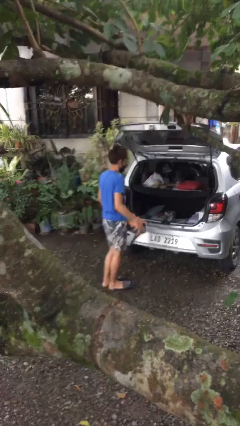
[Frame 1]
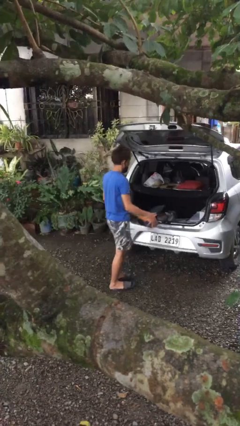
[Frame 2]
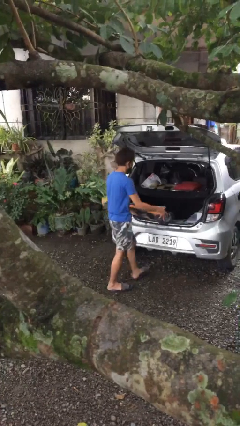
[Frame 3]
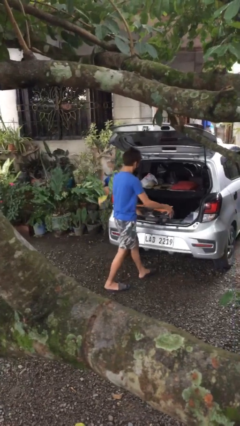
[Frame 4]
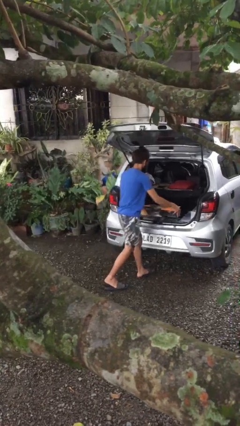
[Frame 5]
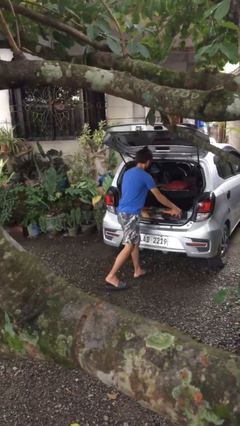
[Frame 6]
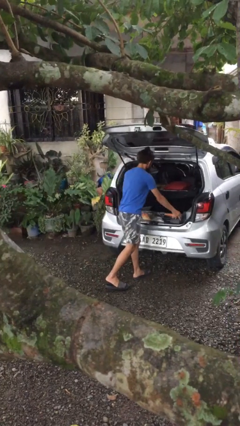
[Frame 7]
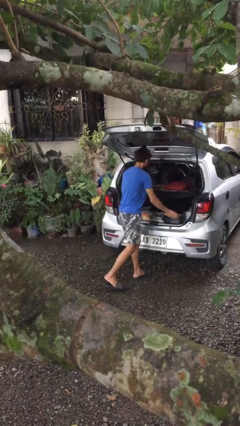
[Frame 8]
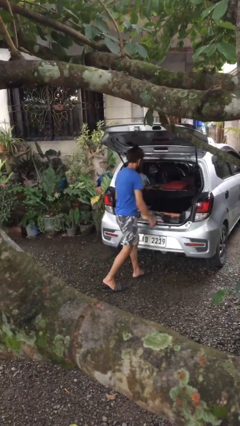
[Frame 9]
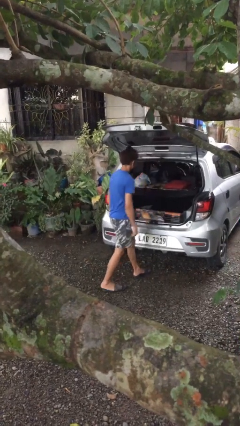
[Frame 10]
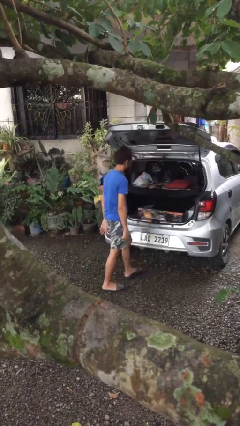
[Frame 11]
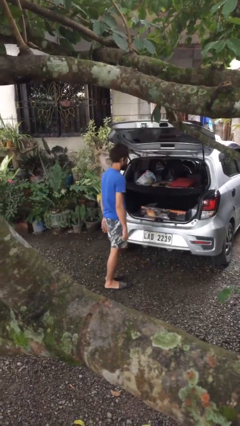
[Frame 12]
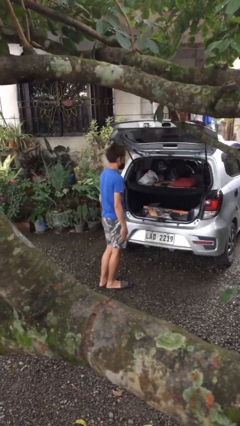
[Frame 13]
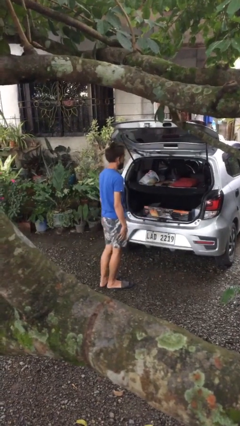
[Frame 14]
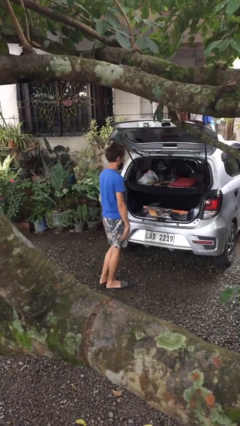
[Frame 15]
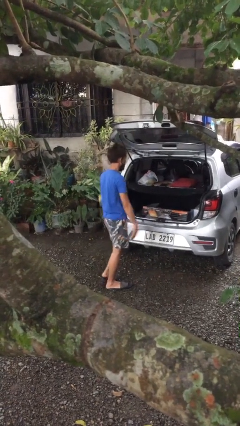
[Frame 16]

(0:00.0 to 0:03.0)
person loads car

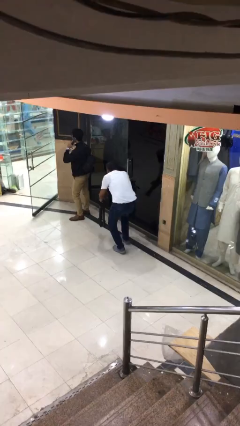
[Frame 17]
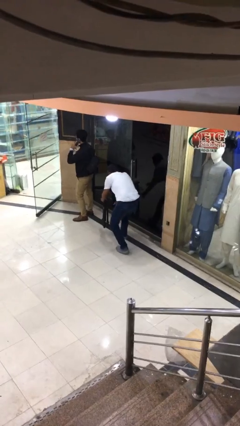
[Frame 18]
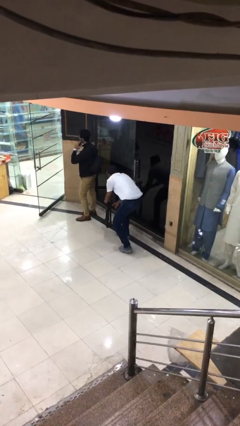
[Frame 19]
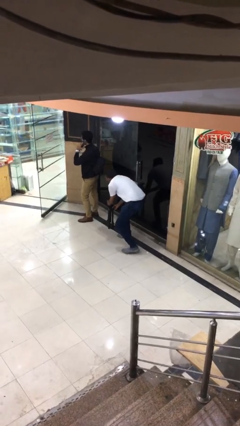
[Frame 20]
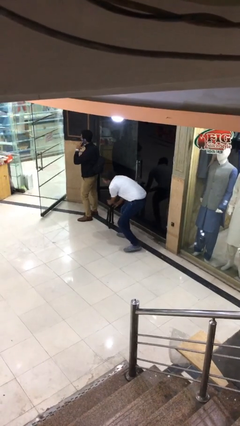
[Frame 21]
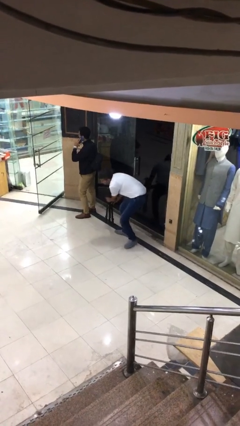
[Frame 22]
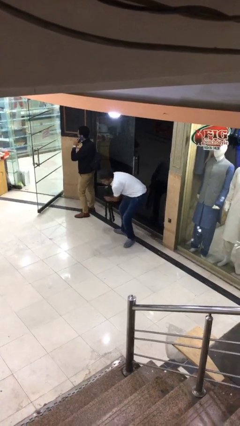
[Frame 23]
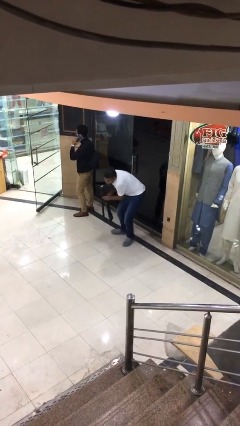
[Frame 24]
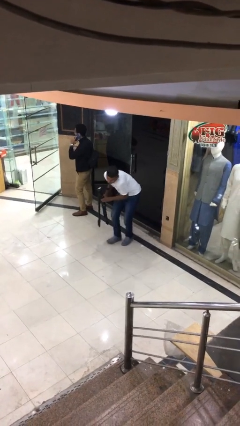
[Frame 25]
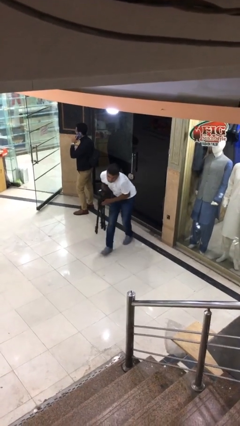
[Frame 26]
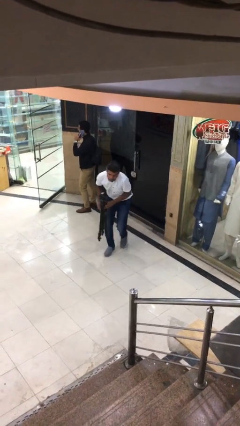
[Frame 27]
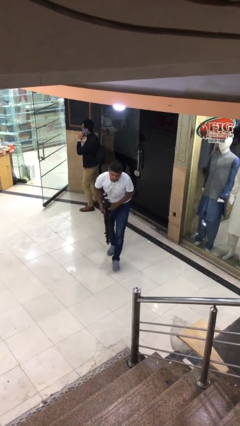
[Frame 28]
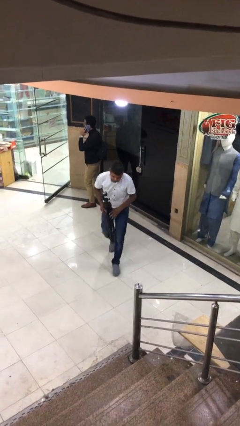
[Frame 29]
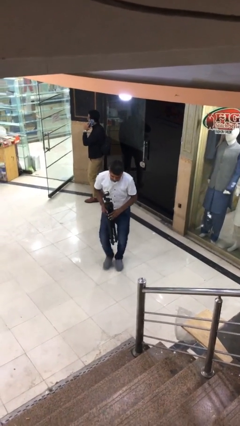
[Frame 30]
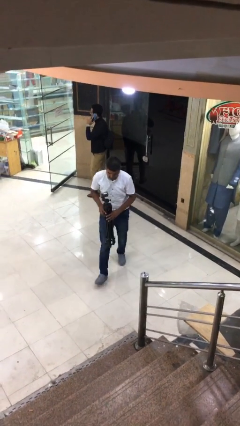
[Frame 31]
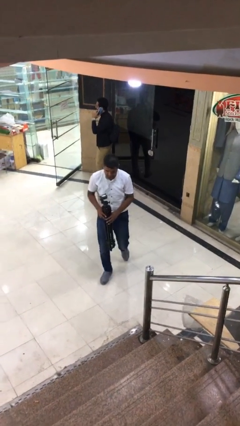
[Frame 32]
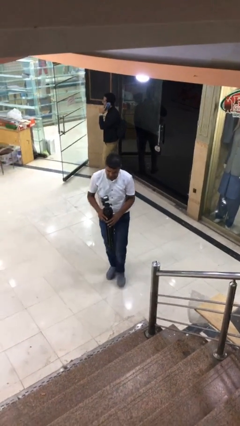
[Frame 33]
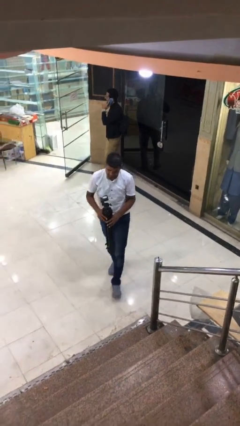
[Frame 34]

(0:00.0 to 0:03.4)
person steals object from person

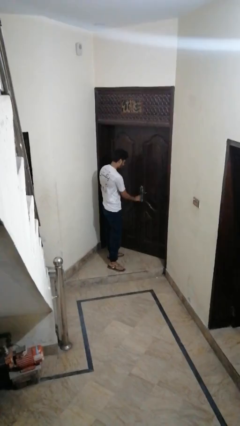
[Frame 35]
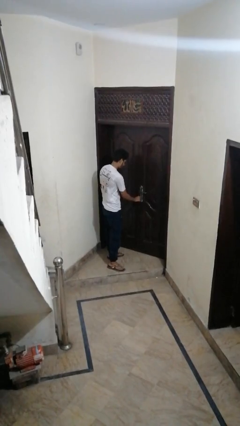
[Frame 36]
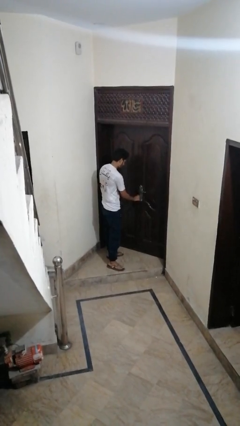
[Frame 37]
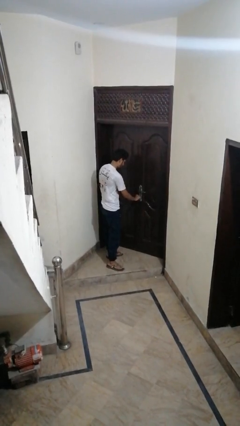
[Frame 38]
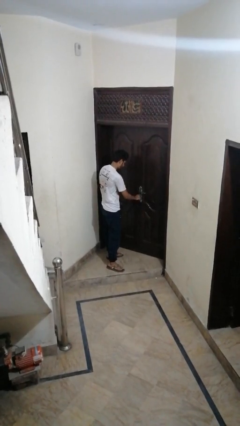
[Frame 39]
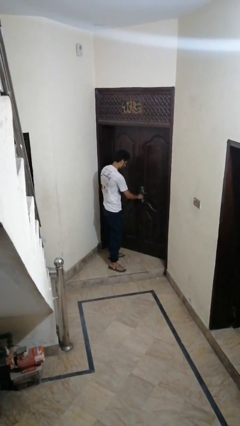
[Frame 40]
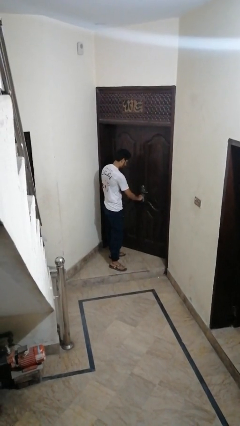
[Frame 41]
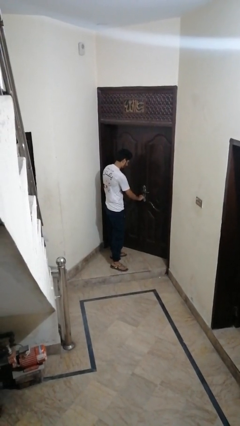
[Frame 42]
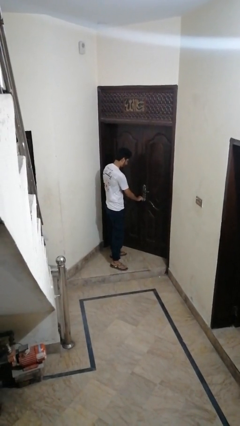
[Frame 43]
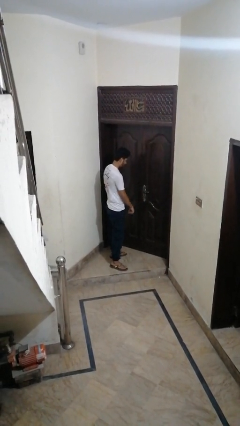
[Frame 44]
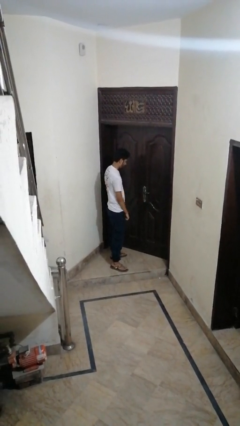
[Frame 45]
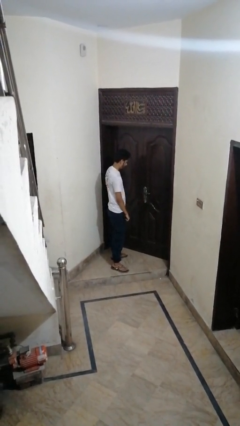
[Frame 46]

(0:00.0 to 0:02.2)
person locks door with keys

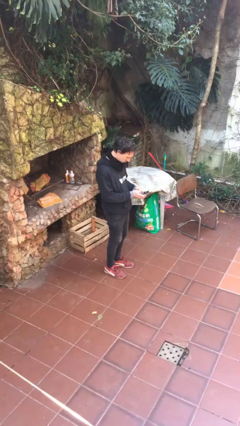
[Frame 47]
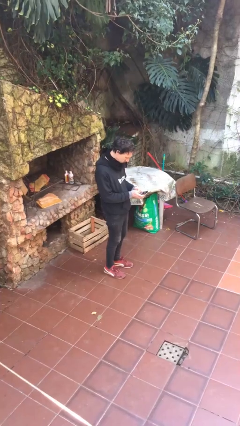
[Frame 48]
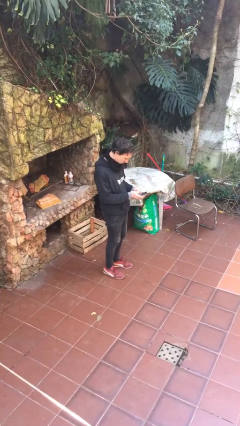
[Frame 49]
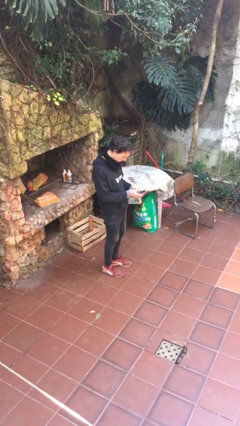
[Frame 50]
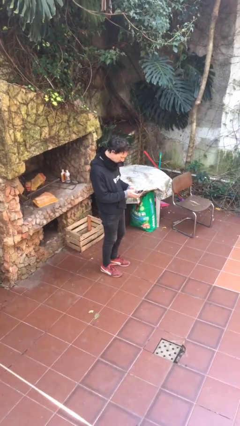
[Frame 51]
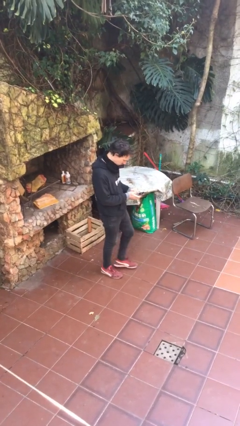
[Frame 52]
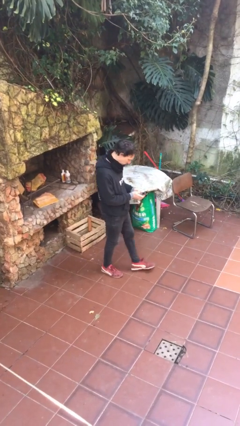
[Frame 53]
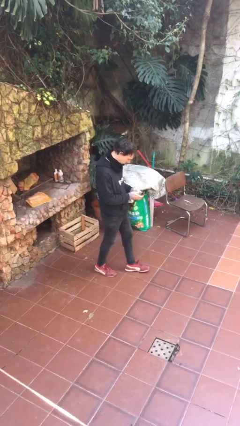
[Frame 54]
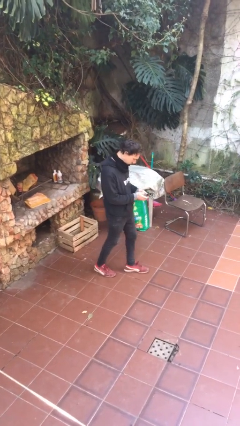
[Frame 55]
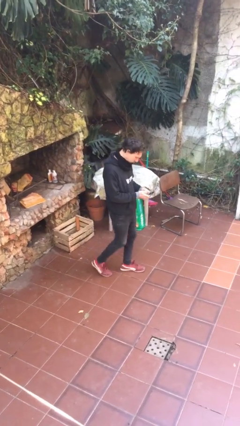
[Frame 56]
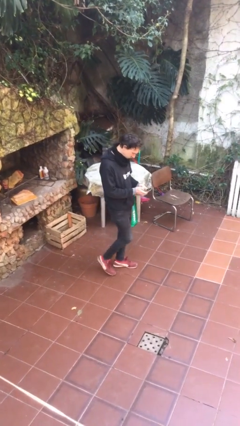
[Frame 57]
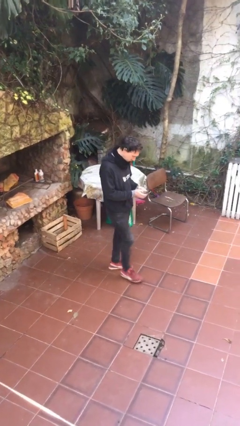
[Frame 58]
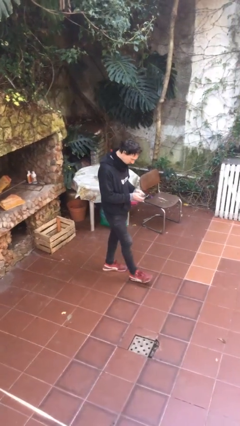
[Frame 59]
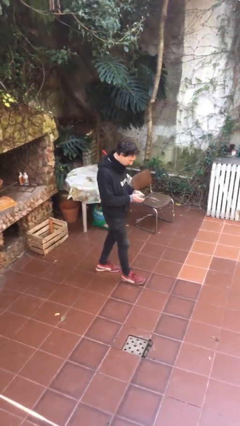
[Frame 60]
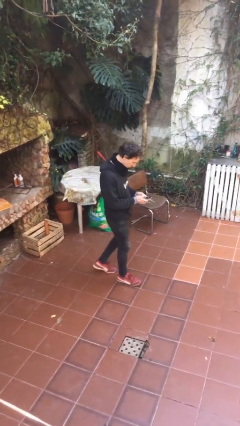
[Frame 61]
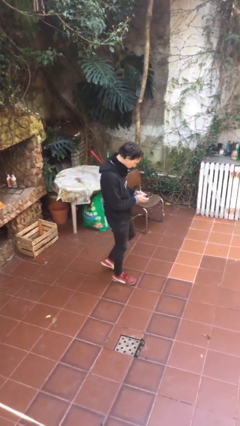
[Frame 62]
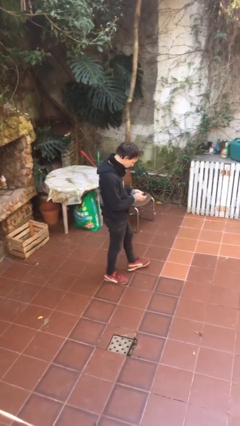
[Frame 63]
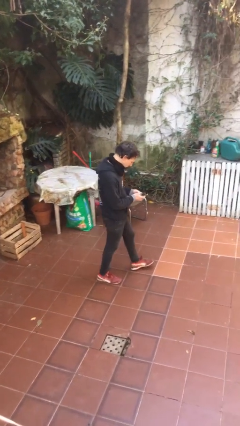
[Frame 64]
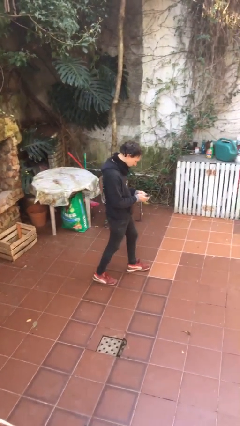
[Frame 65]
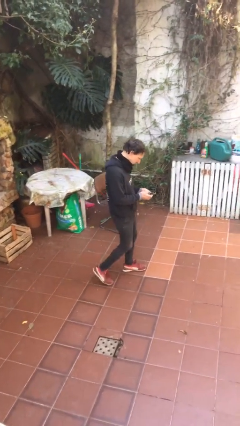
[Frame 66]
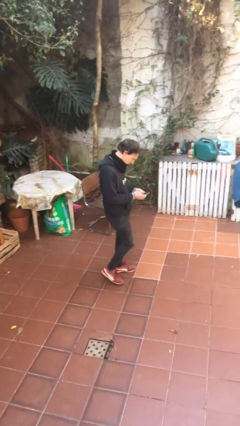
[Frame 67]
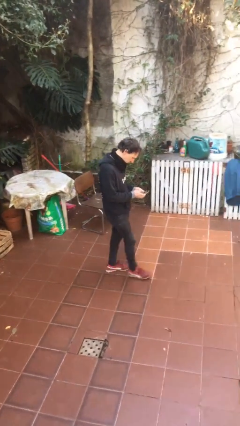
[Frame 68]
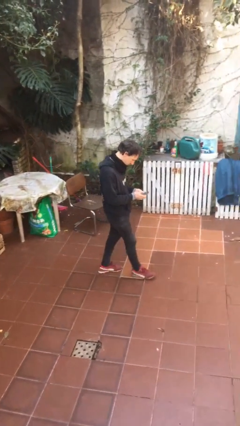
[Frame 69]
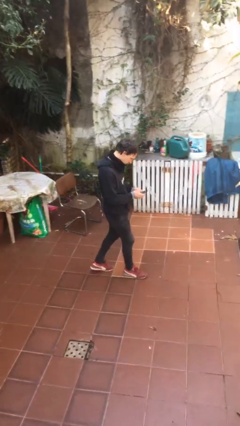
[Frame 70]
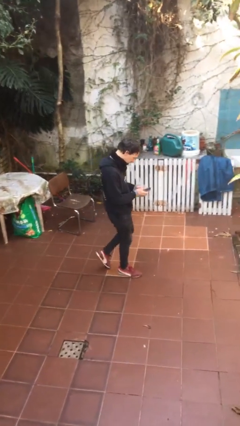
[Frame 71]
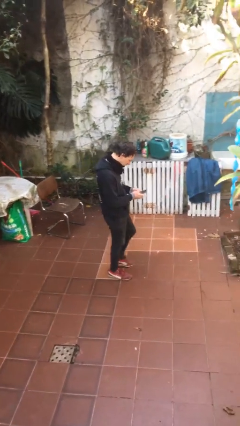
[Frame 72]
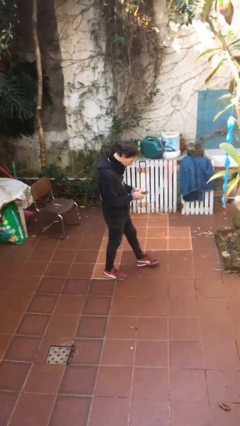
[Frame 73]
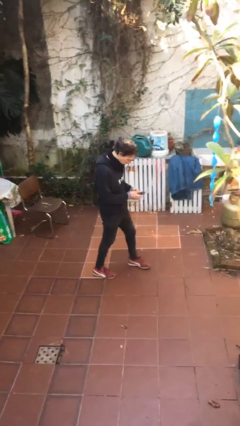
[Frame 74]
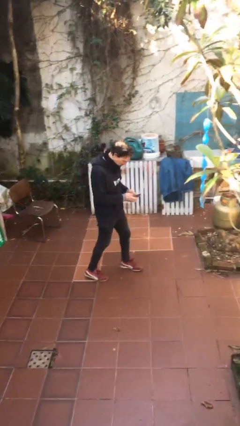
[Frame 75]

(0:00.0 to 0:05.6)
person texts on phone

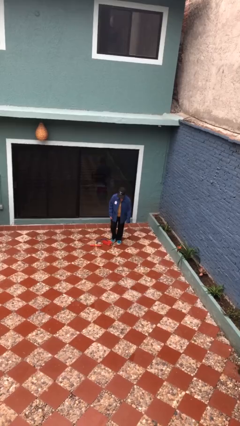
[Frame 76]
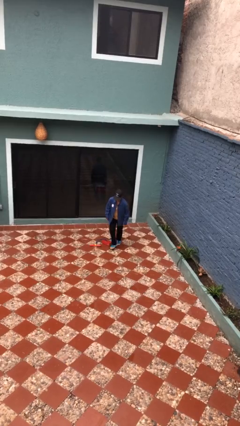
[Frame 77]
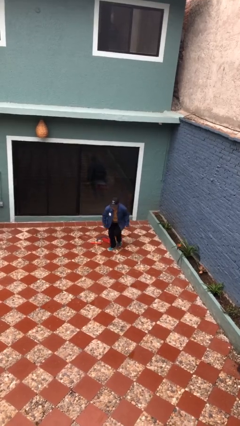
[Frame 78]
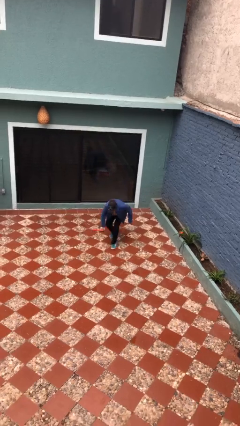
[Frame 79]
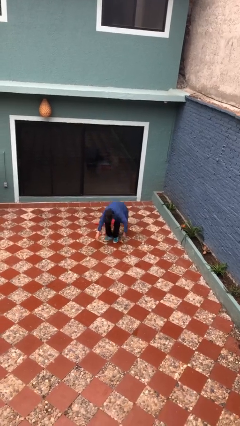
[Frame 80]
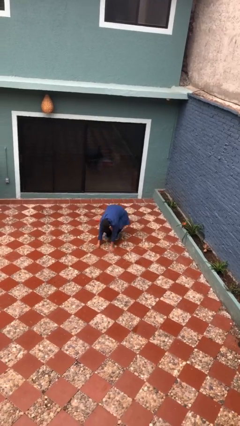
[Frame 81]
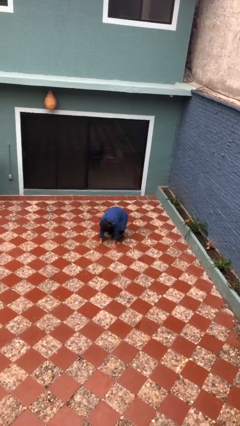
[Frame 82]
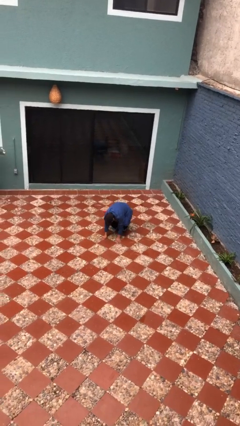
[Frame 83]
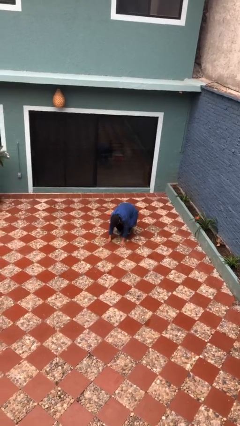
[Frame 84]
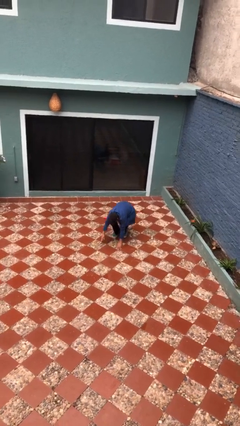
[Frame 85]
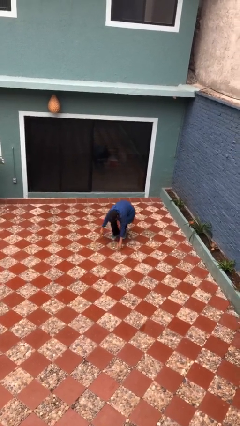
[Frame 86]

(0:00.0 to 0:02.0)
person trips on object on floor

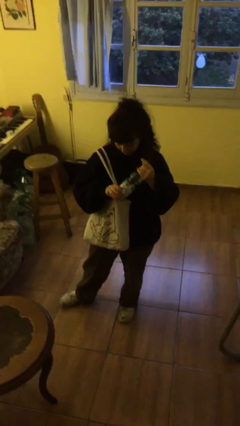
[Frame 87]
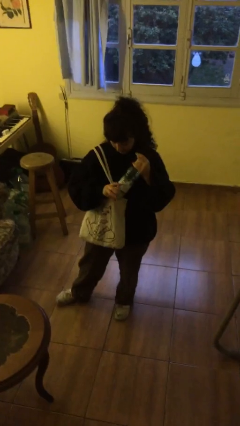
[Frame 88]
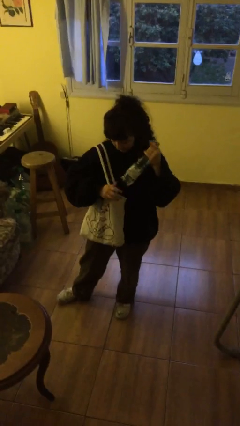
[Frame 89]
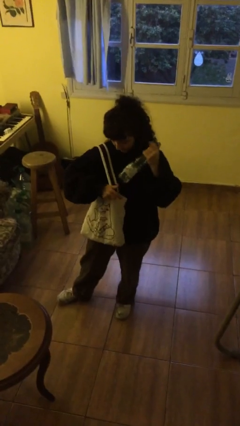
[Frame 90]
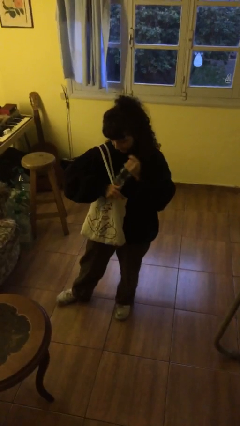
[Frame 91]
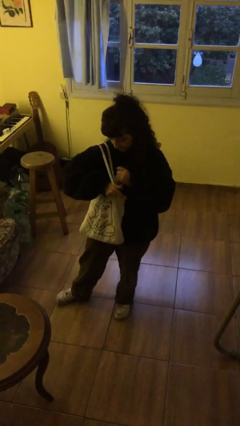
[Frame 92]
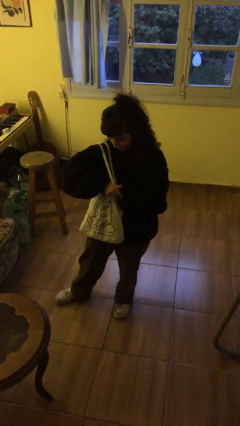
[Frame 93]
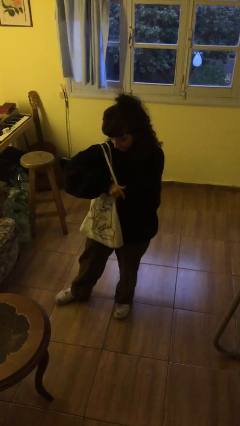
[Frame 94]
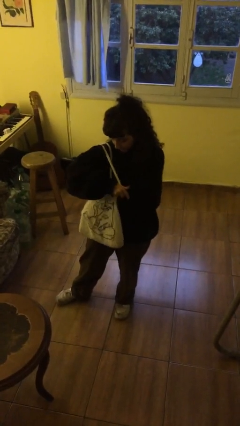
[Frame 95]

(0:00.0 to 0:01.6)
person puts object into purse
